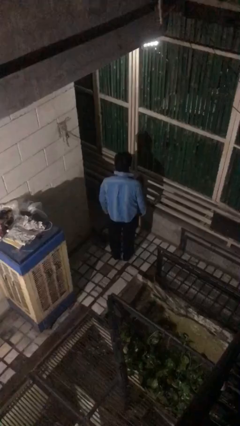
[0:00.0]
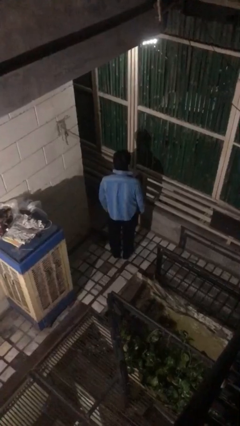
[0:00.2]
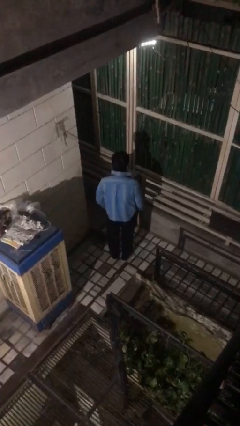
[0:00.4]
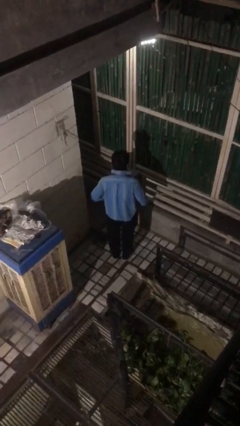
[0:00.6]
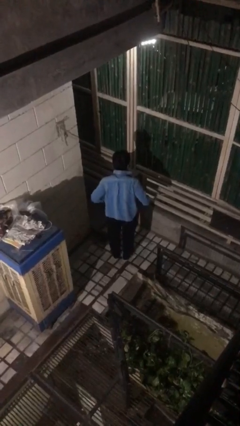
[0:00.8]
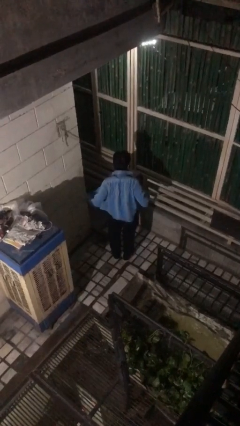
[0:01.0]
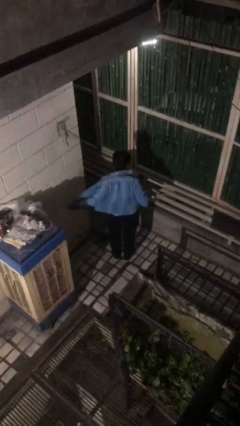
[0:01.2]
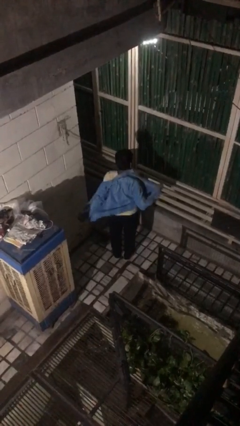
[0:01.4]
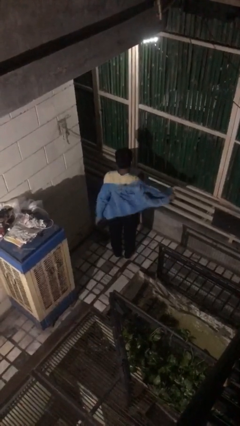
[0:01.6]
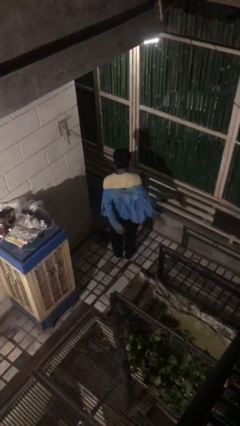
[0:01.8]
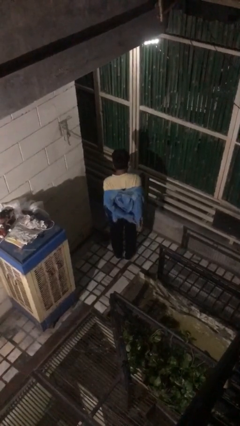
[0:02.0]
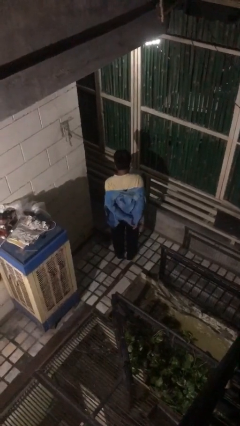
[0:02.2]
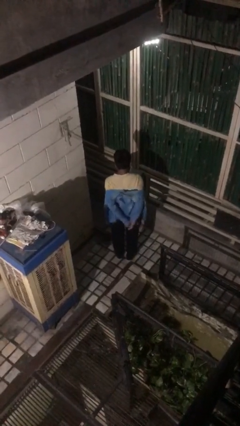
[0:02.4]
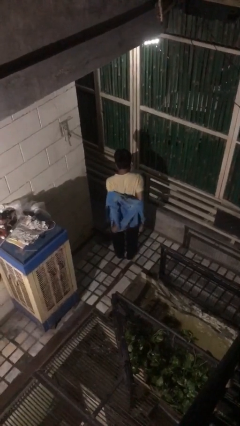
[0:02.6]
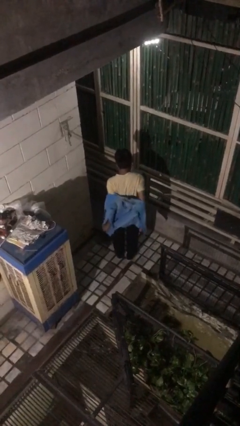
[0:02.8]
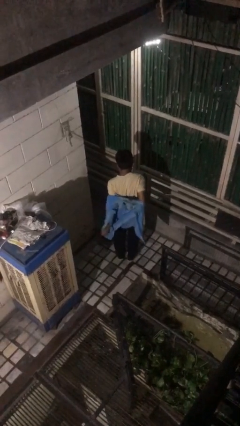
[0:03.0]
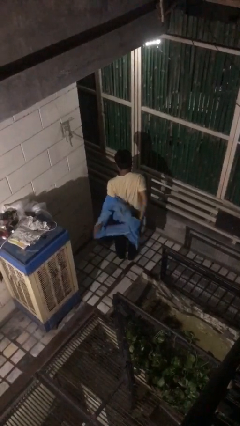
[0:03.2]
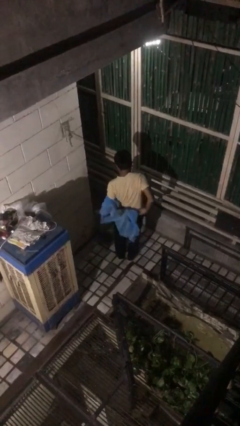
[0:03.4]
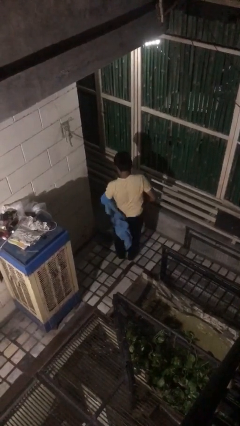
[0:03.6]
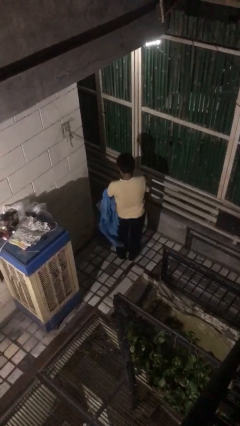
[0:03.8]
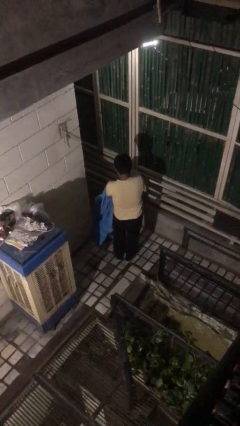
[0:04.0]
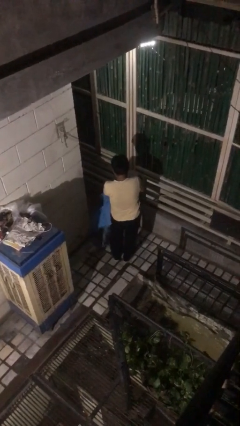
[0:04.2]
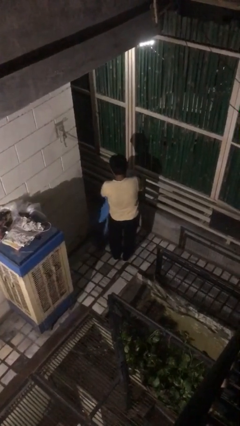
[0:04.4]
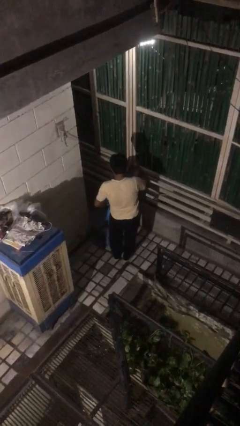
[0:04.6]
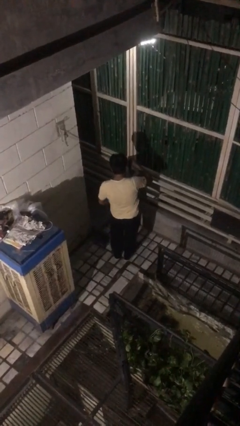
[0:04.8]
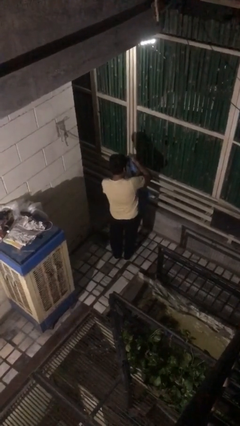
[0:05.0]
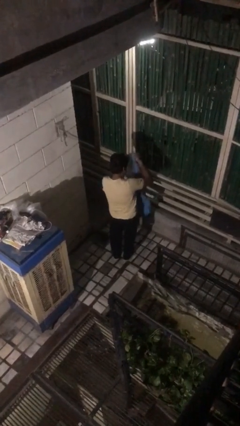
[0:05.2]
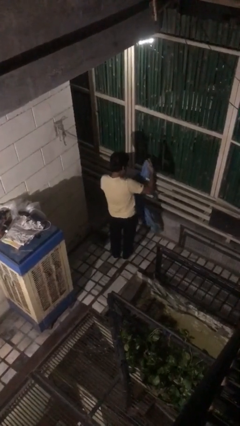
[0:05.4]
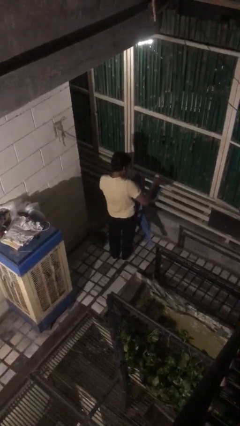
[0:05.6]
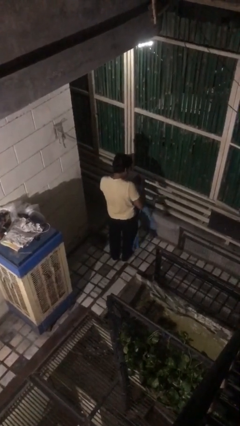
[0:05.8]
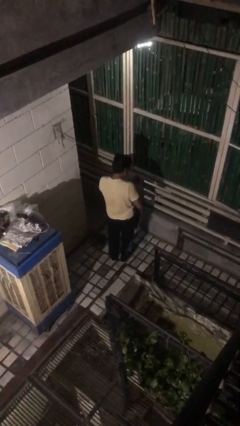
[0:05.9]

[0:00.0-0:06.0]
person takes off shirt

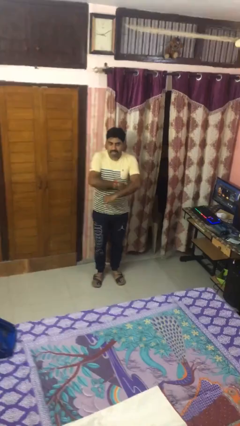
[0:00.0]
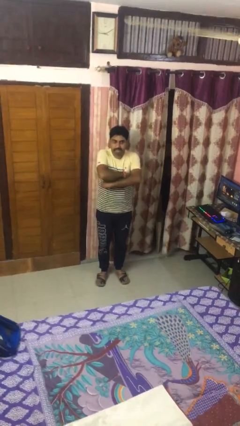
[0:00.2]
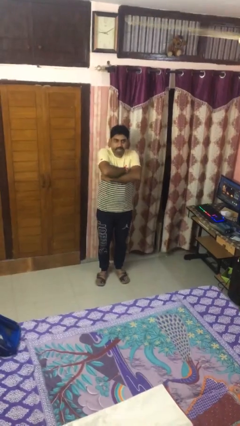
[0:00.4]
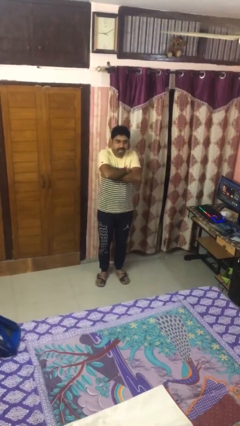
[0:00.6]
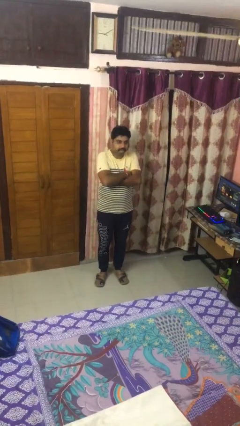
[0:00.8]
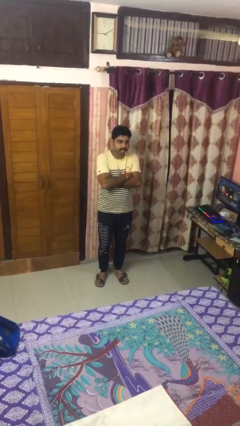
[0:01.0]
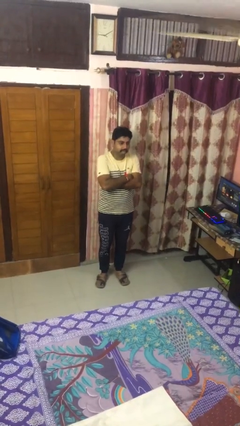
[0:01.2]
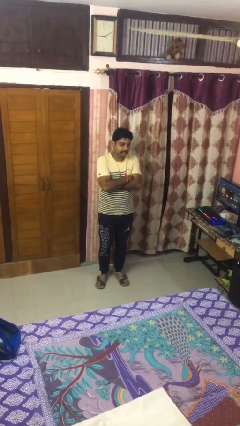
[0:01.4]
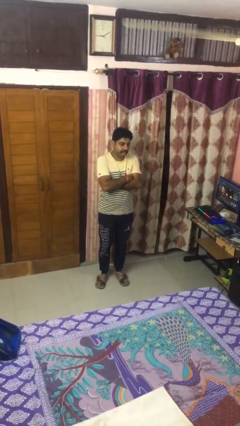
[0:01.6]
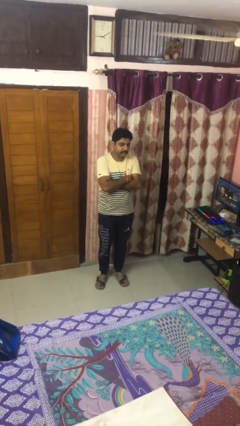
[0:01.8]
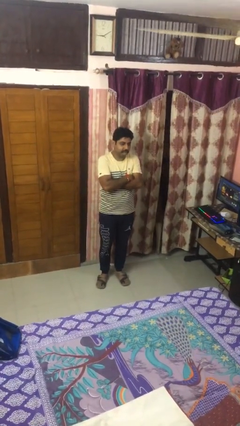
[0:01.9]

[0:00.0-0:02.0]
person crosses arms

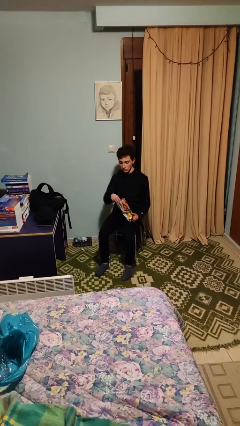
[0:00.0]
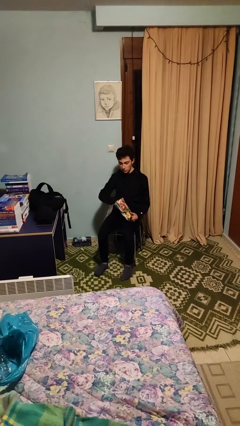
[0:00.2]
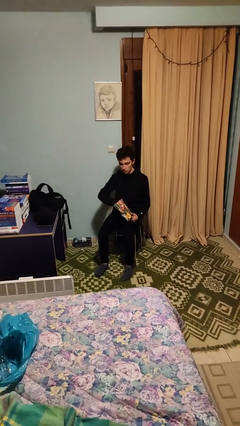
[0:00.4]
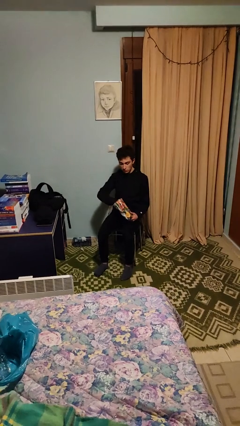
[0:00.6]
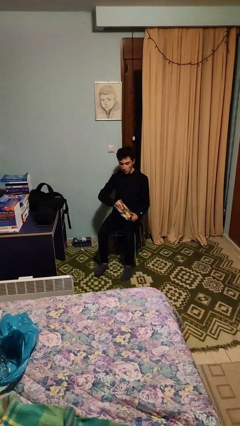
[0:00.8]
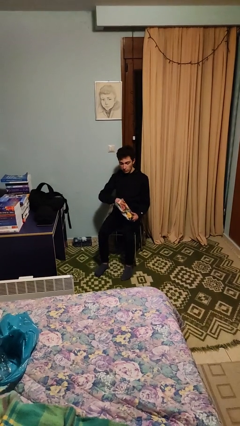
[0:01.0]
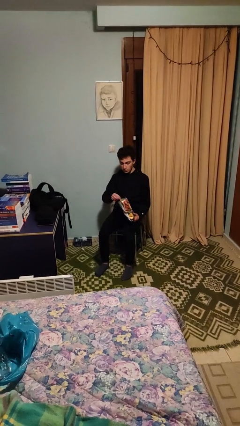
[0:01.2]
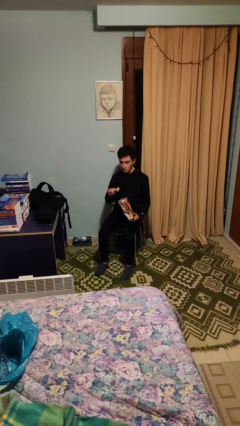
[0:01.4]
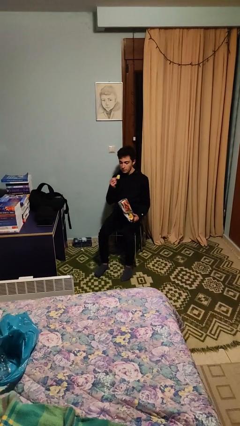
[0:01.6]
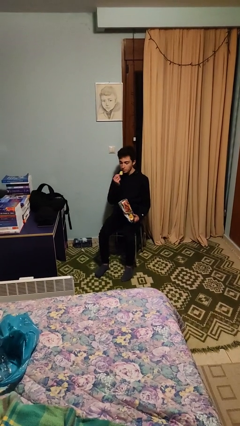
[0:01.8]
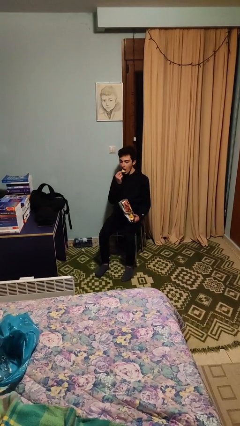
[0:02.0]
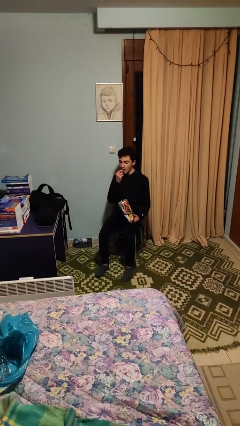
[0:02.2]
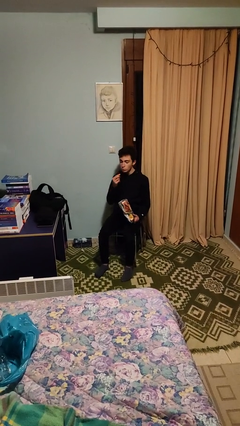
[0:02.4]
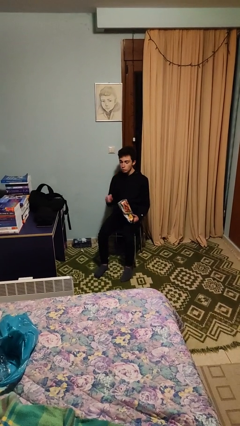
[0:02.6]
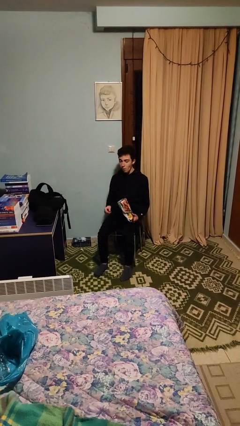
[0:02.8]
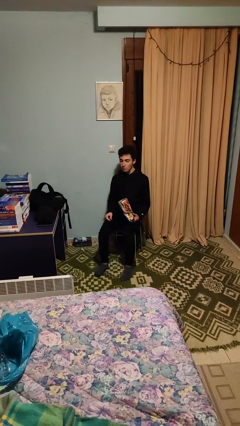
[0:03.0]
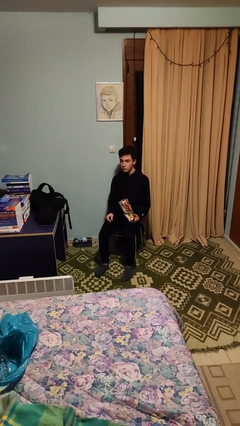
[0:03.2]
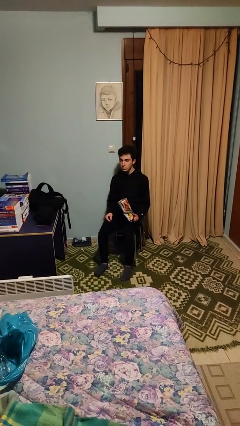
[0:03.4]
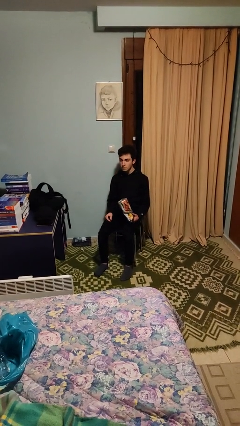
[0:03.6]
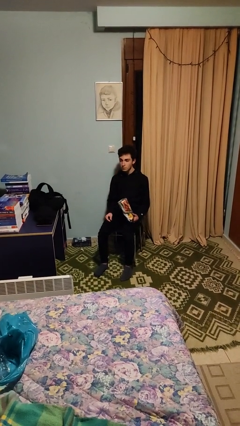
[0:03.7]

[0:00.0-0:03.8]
person eats snack from bag

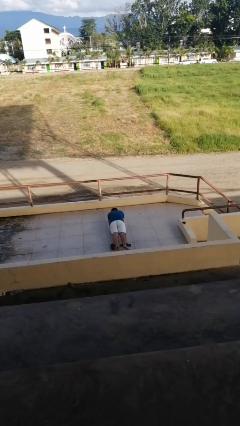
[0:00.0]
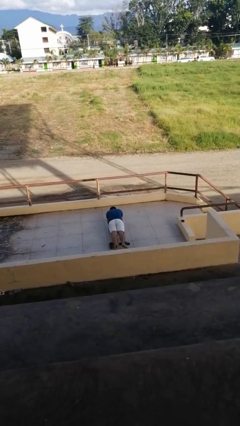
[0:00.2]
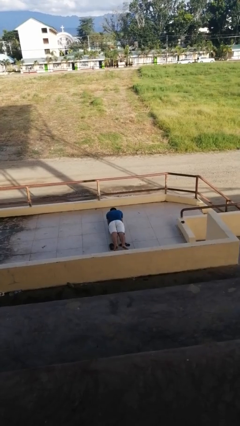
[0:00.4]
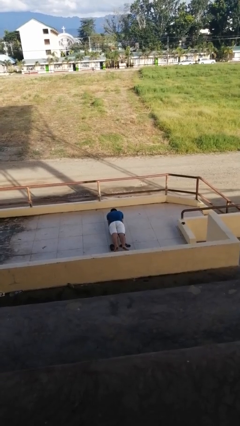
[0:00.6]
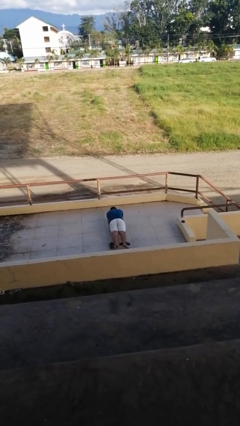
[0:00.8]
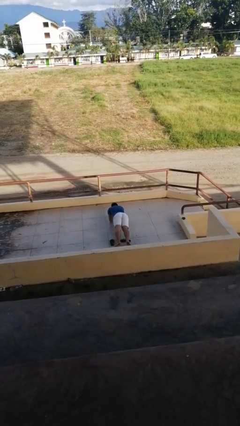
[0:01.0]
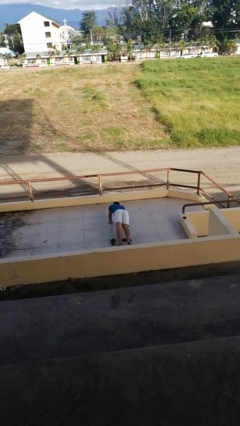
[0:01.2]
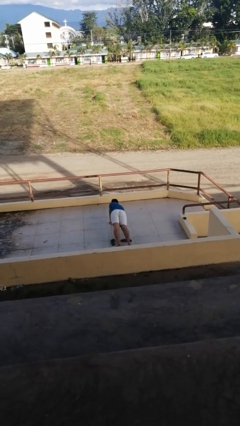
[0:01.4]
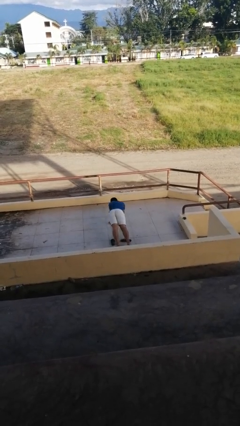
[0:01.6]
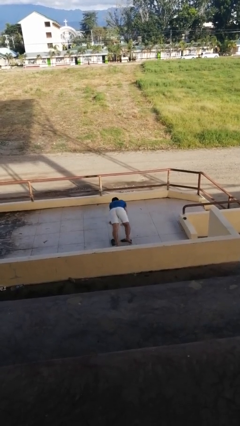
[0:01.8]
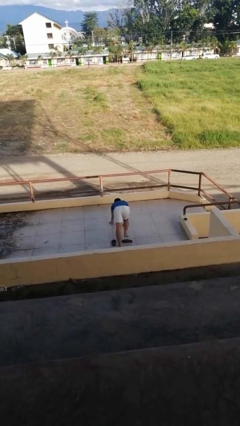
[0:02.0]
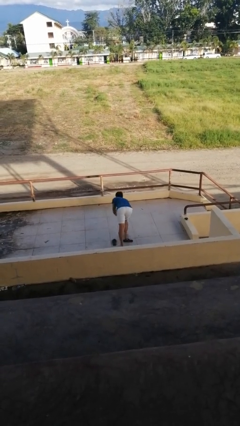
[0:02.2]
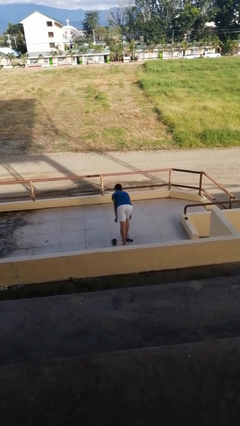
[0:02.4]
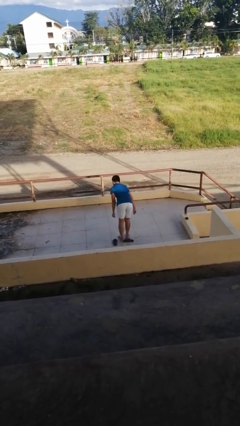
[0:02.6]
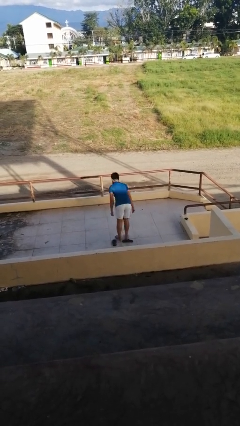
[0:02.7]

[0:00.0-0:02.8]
person stands up from floor

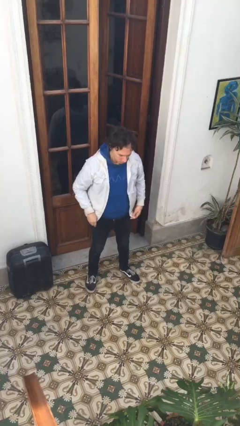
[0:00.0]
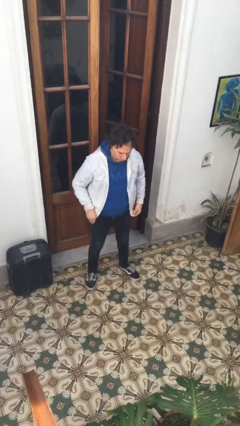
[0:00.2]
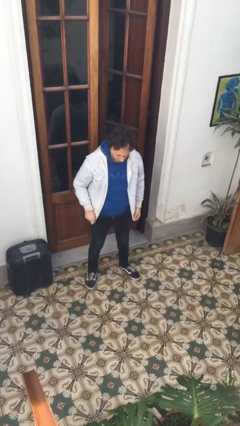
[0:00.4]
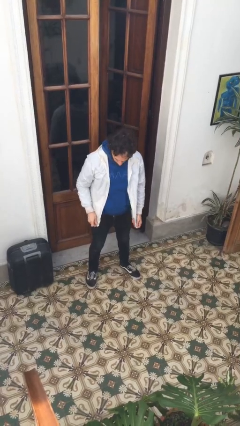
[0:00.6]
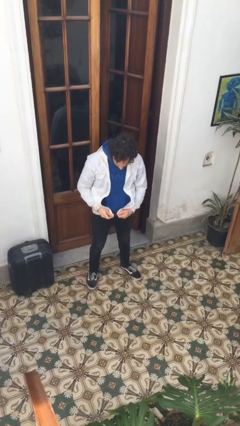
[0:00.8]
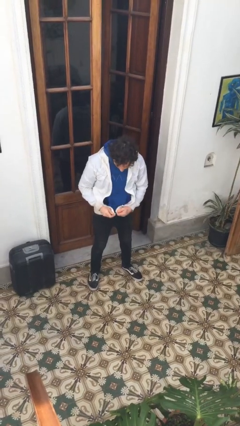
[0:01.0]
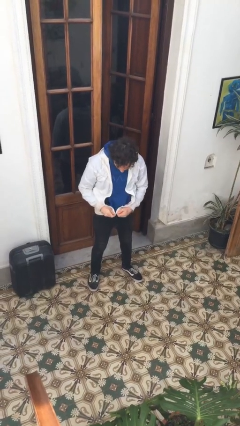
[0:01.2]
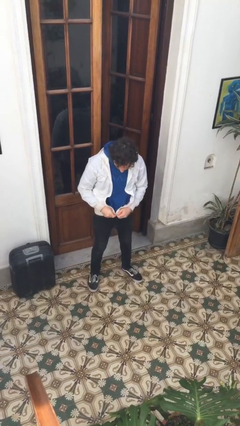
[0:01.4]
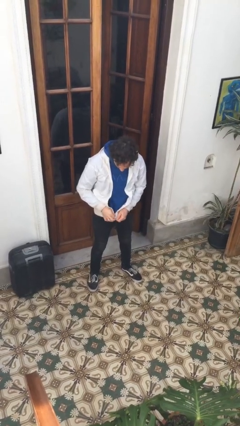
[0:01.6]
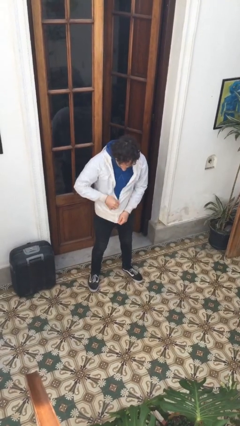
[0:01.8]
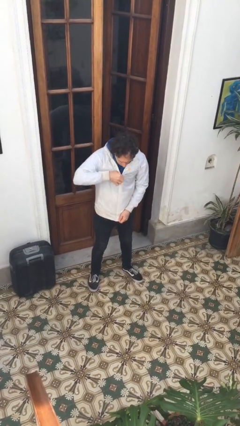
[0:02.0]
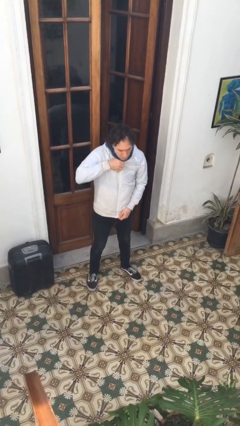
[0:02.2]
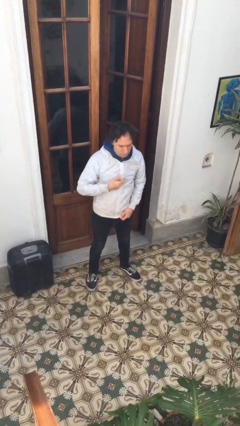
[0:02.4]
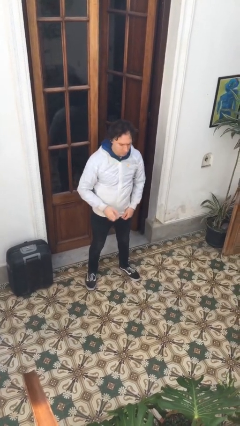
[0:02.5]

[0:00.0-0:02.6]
person zips up jacket
